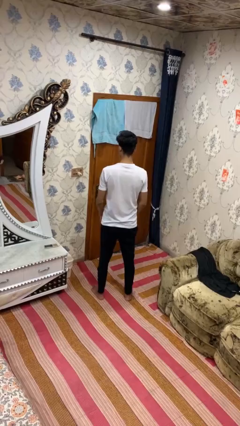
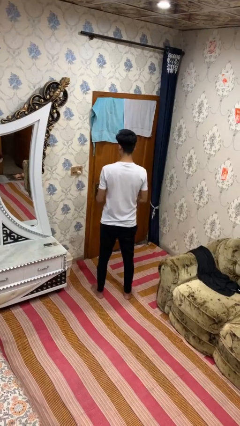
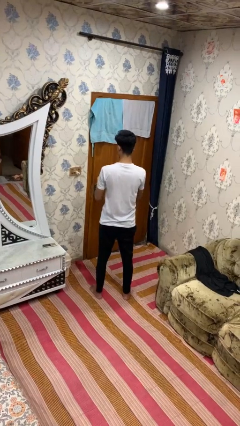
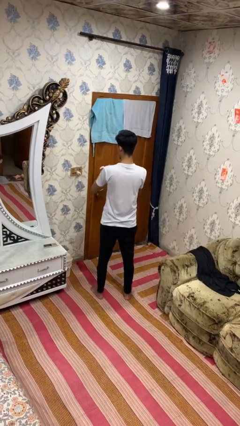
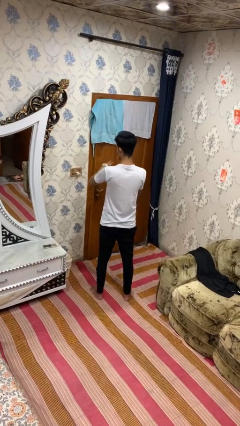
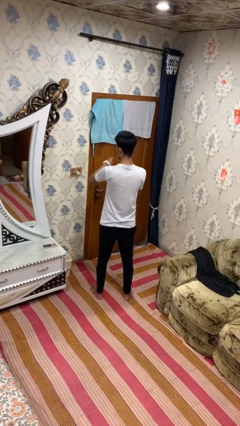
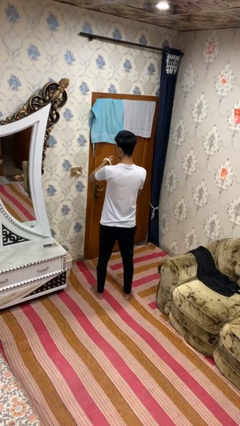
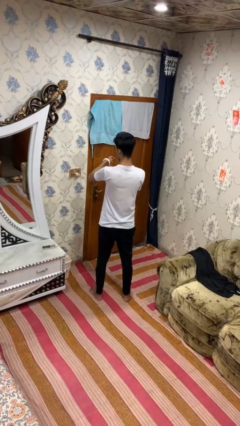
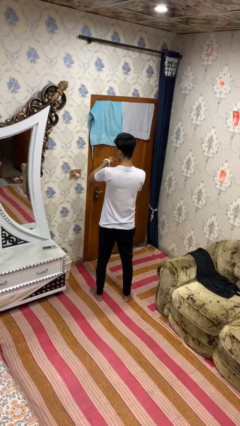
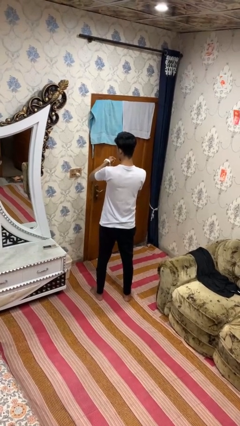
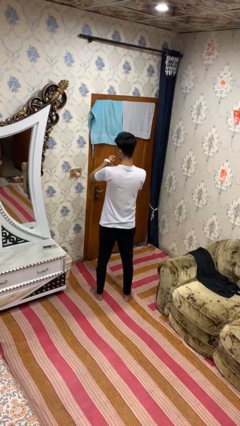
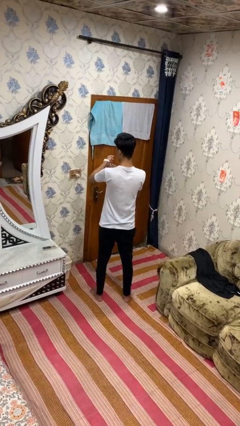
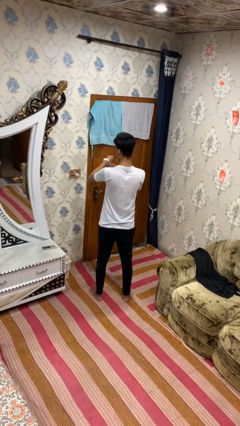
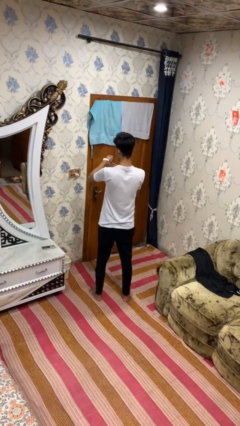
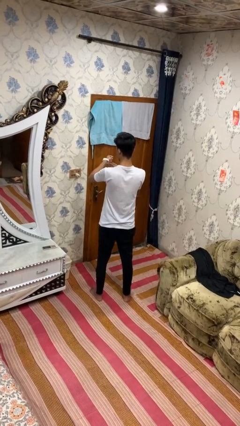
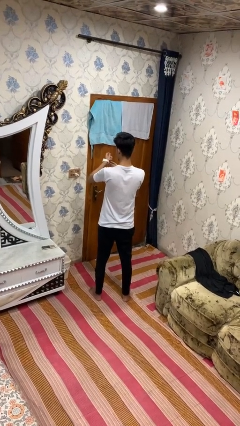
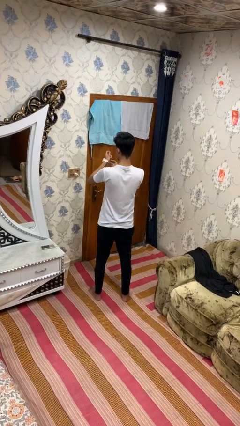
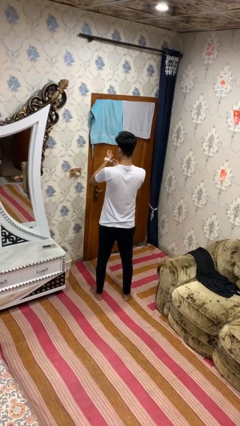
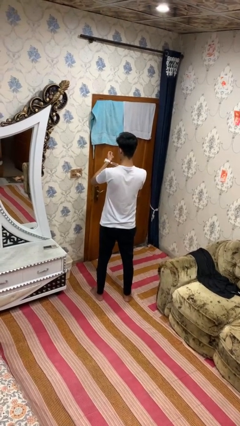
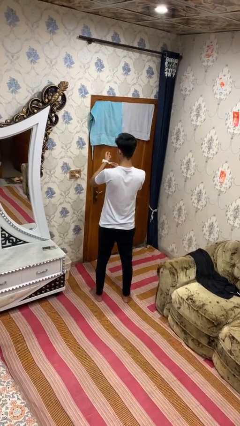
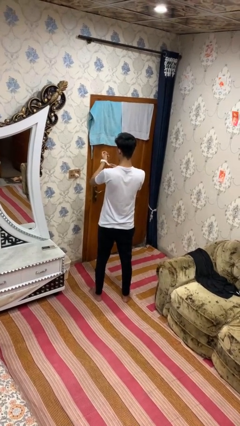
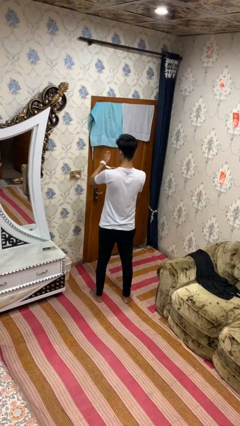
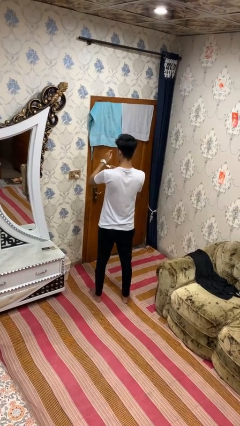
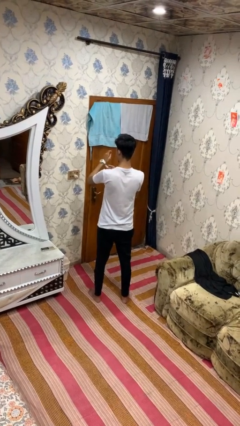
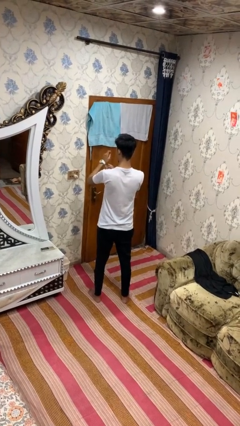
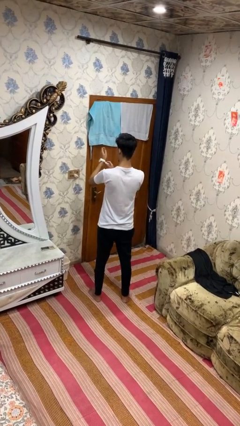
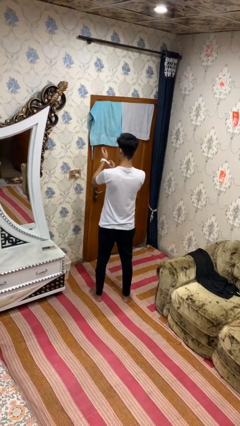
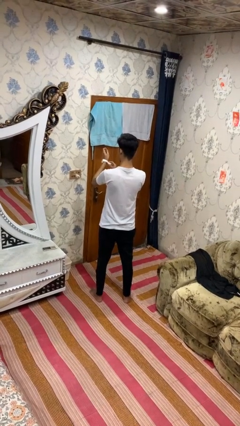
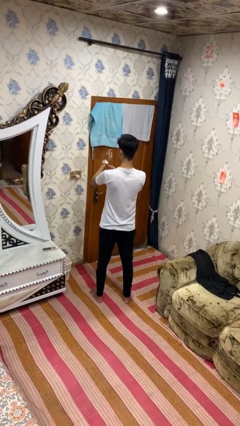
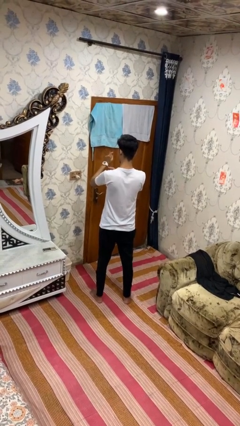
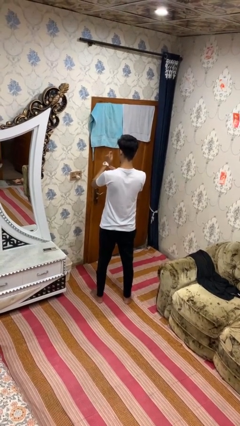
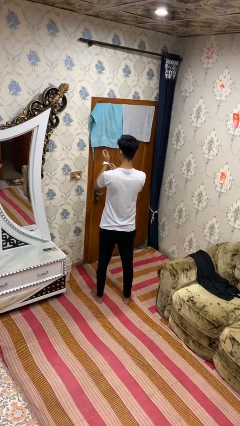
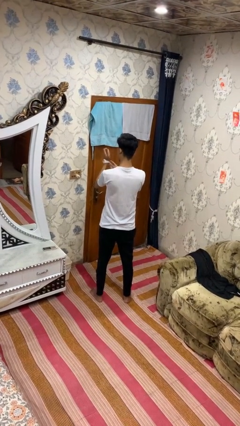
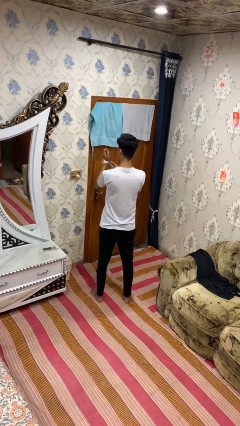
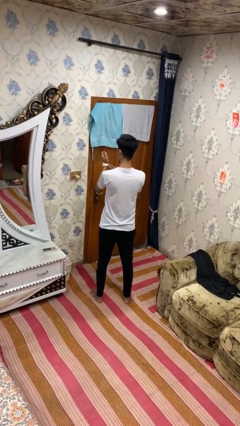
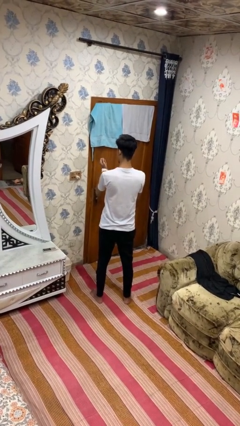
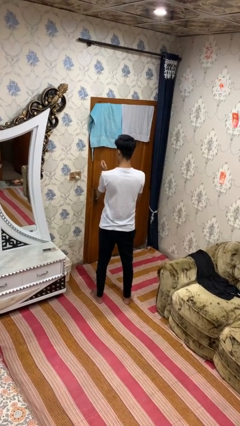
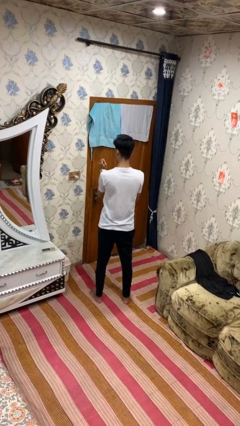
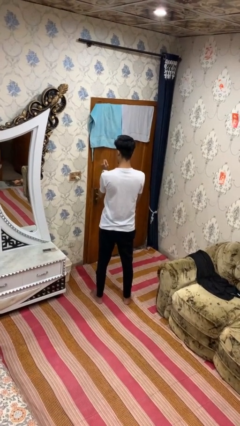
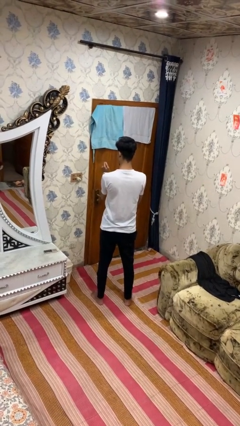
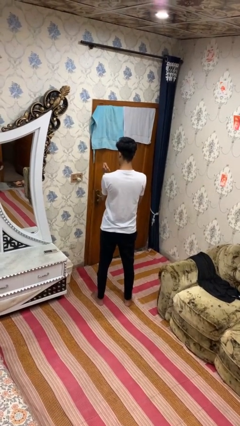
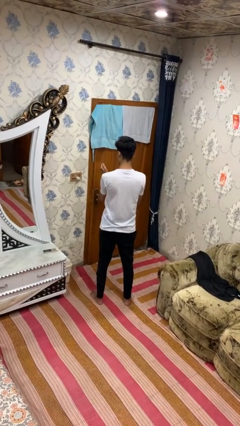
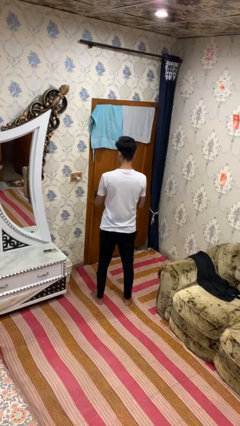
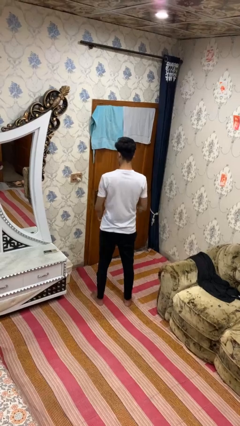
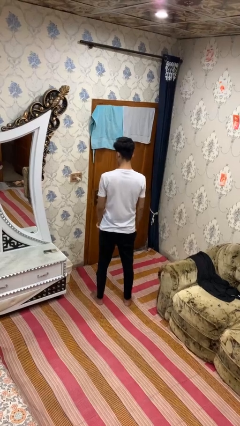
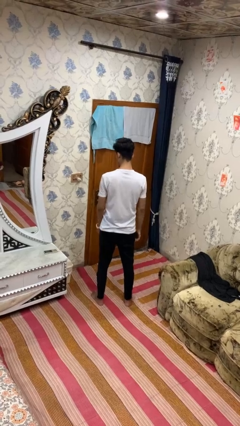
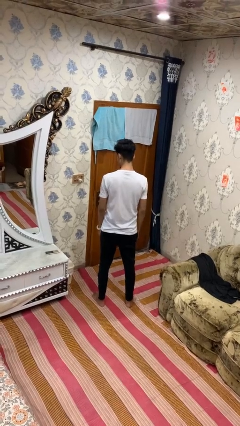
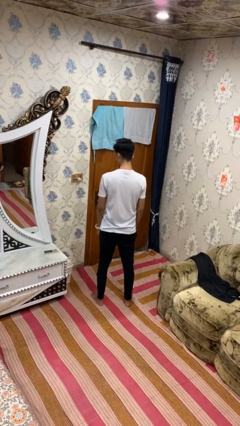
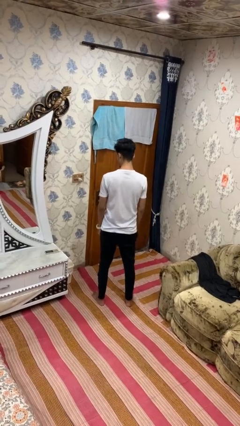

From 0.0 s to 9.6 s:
person puts on wristwatch

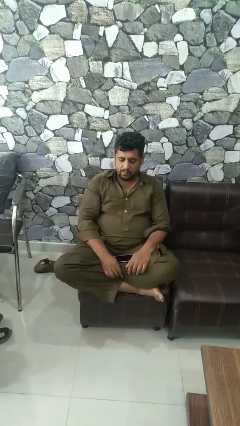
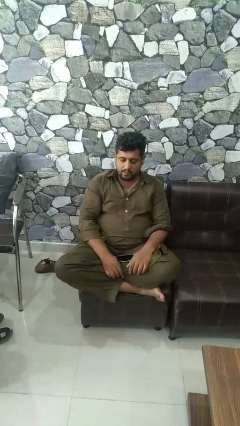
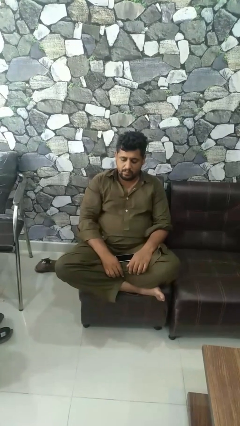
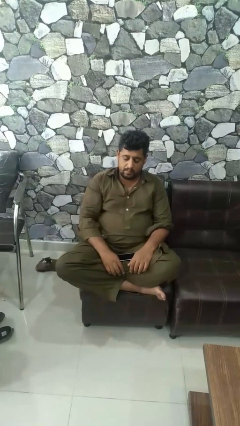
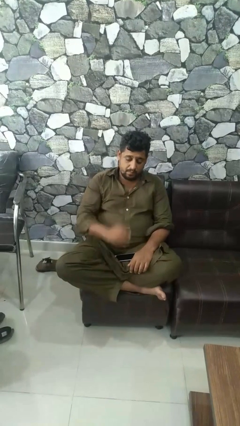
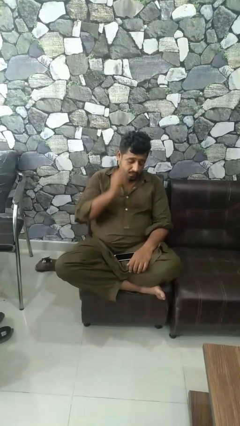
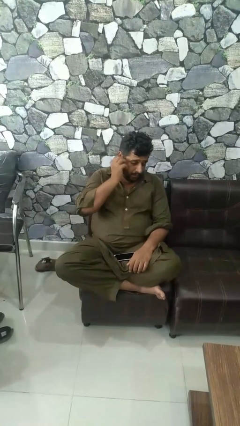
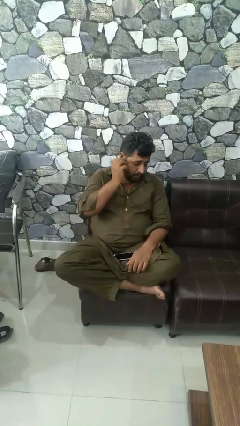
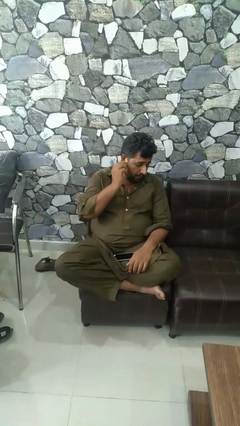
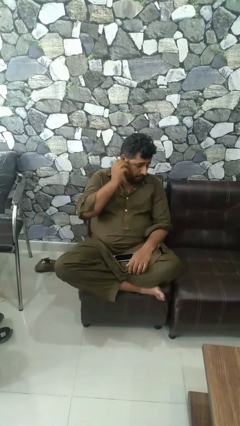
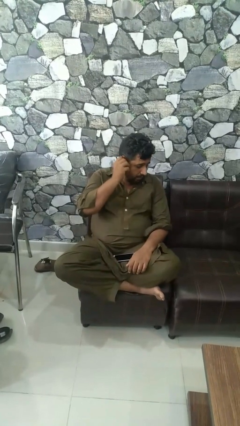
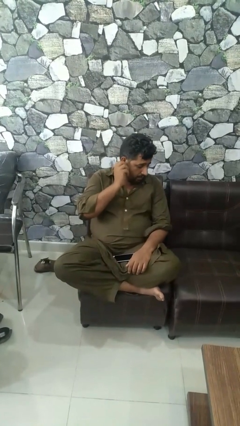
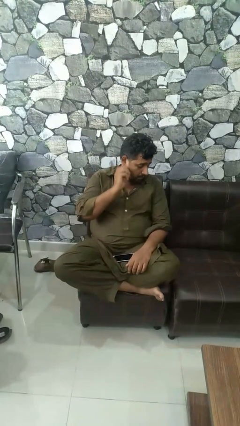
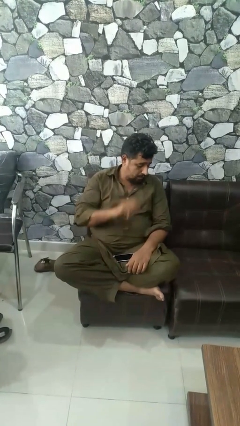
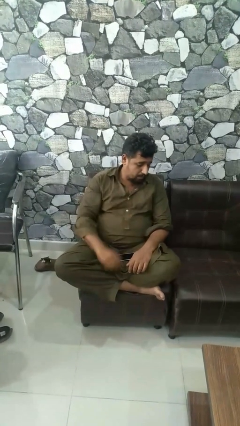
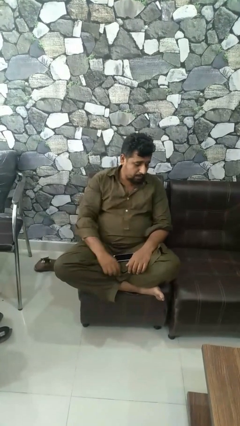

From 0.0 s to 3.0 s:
person touches earlobe

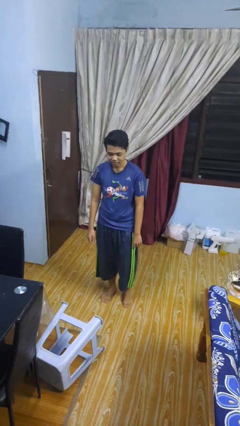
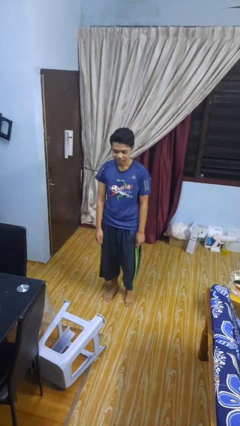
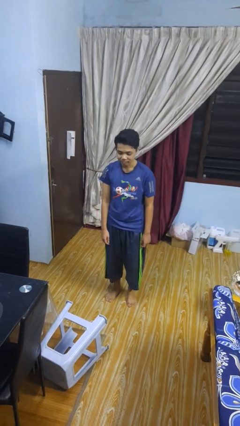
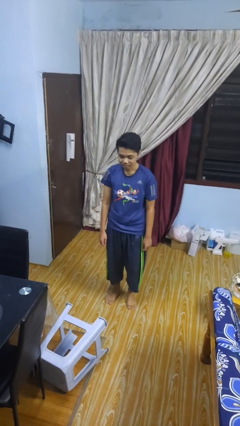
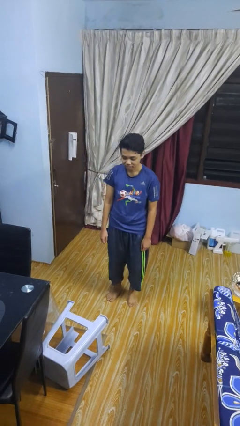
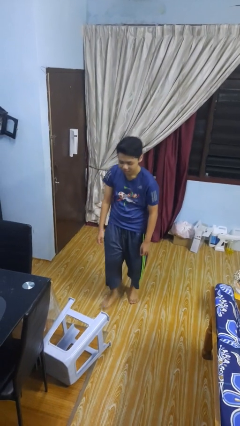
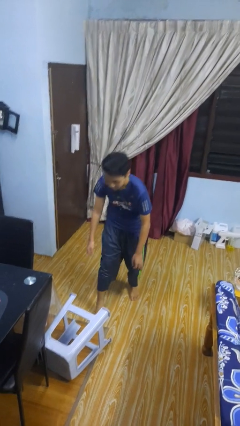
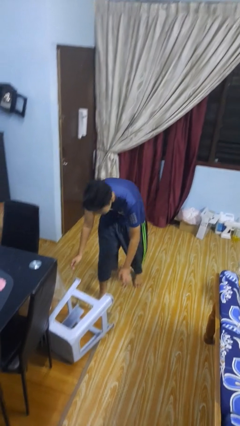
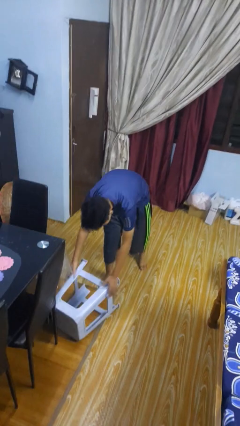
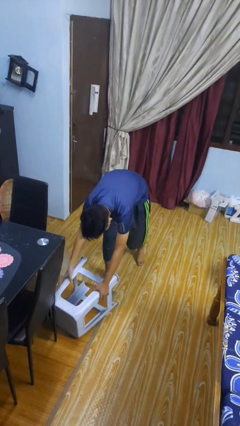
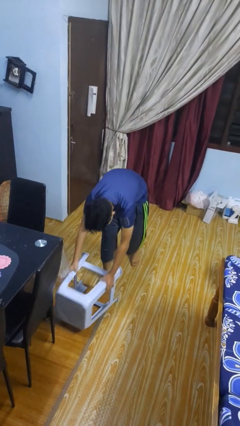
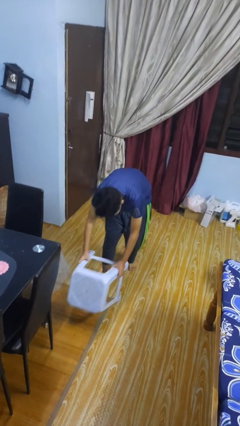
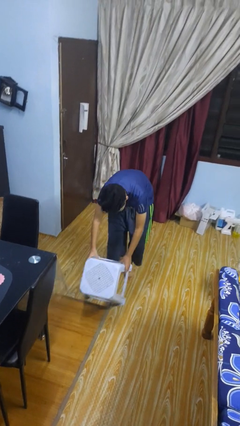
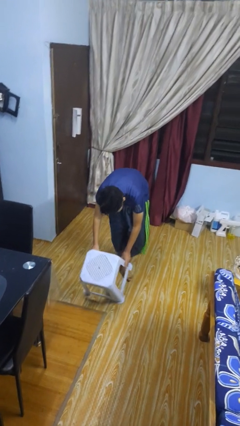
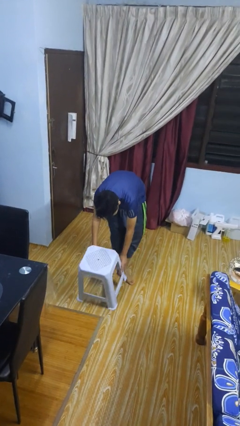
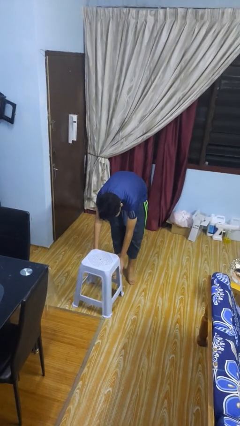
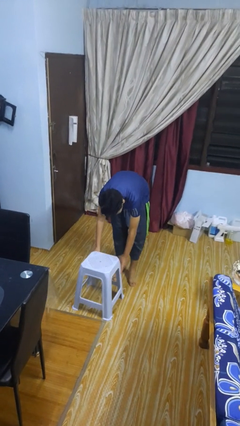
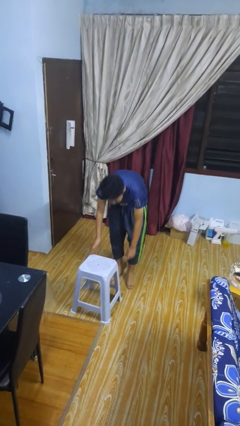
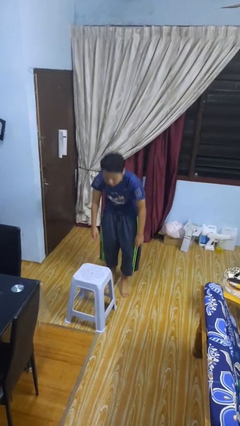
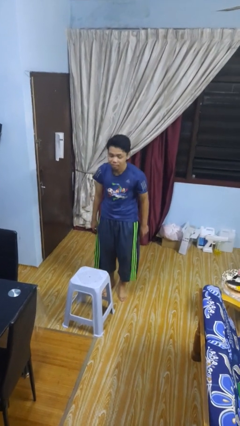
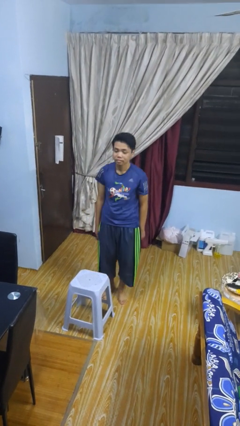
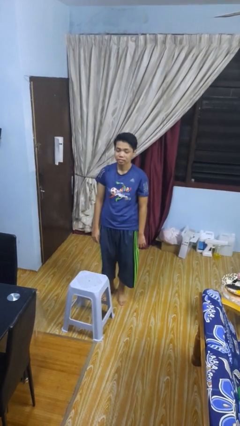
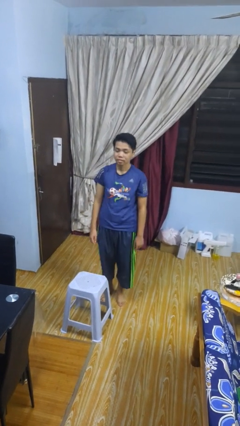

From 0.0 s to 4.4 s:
person sets upright furniture

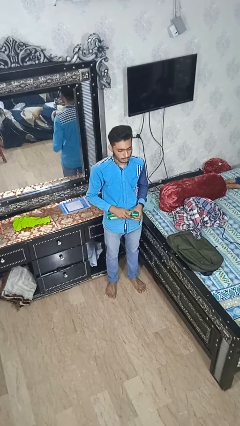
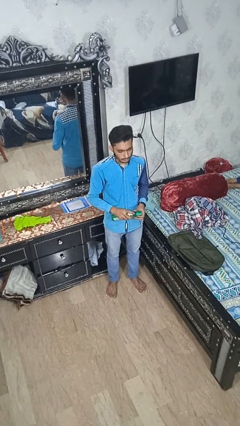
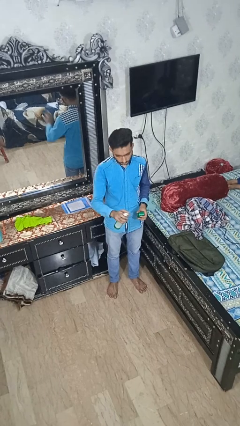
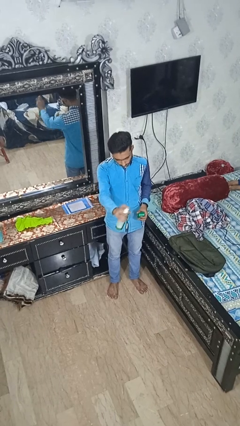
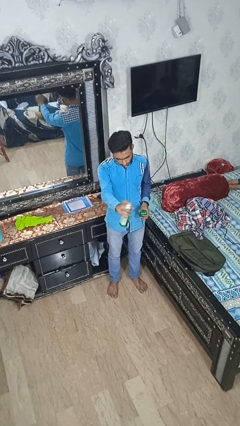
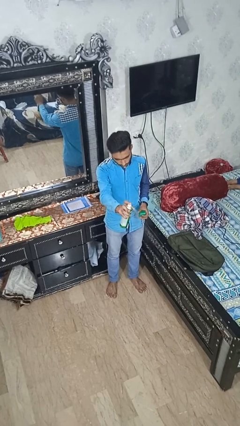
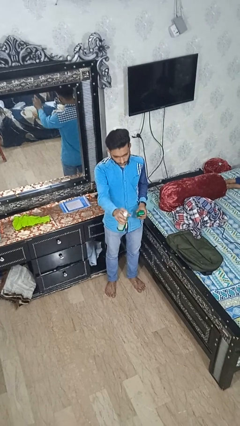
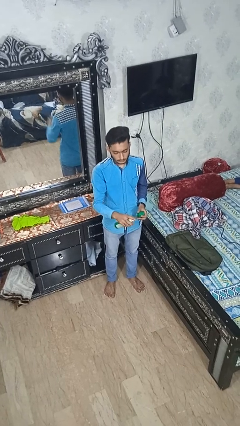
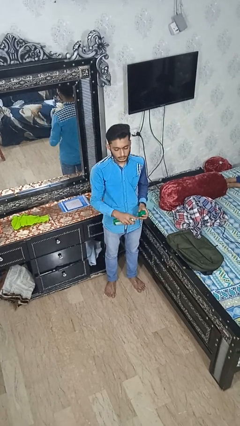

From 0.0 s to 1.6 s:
person sprays from bottle
